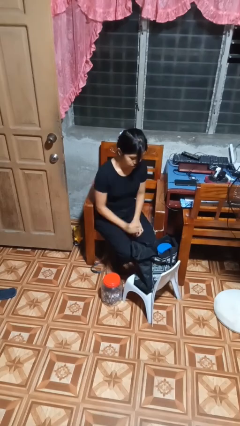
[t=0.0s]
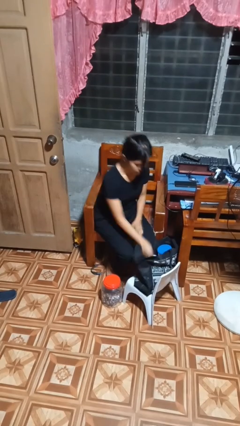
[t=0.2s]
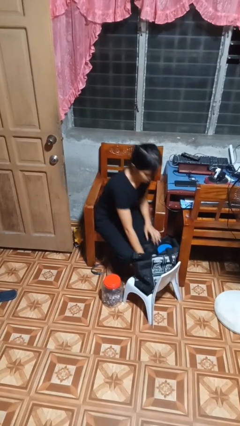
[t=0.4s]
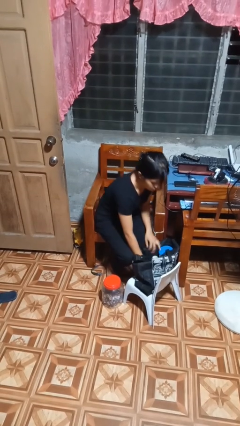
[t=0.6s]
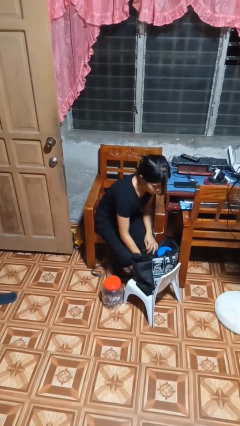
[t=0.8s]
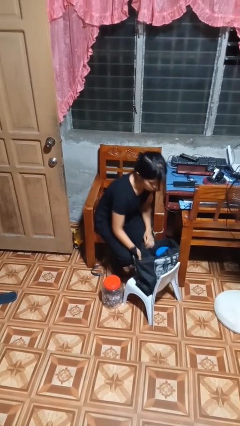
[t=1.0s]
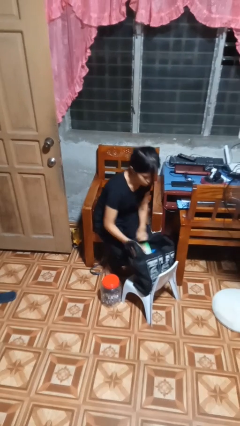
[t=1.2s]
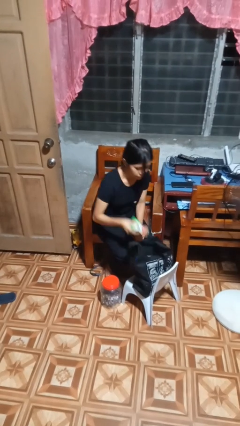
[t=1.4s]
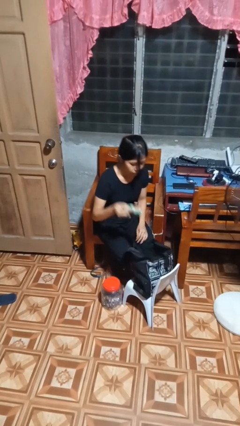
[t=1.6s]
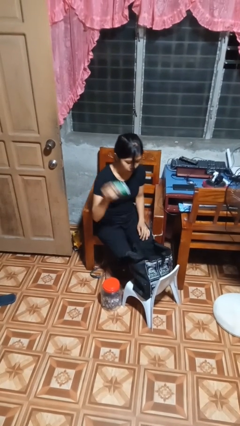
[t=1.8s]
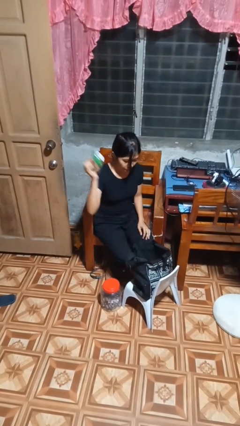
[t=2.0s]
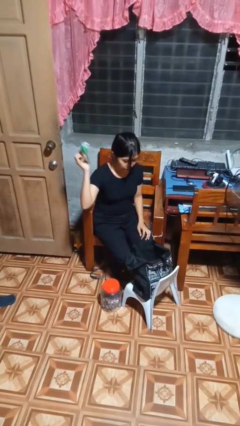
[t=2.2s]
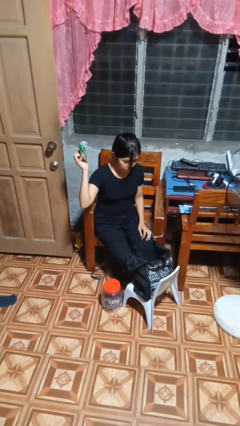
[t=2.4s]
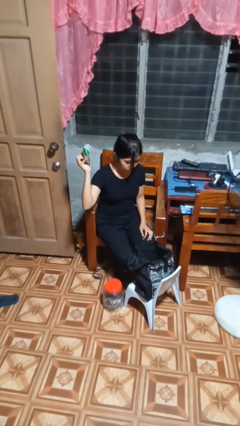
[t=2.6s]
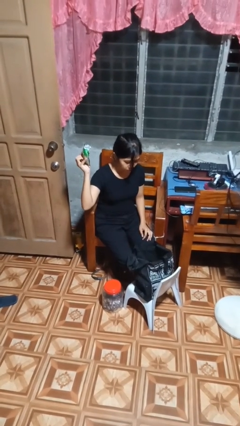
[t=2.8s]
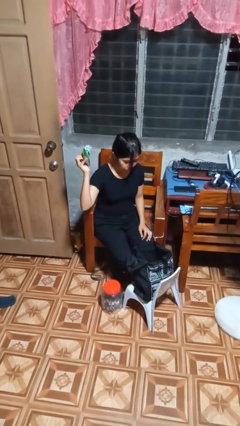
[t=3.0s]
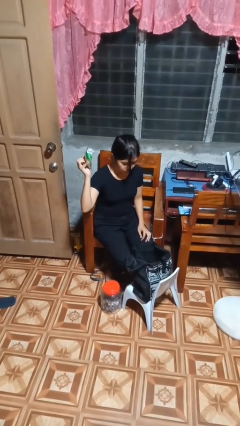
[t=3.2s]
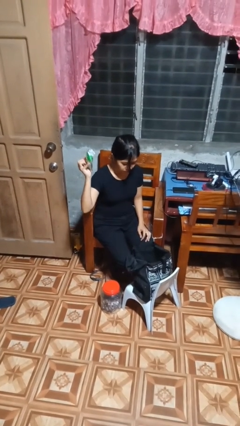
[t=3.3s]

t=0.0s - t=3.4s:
person searches in bag

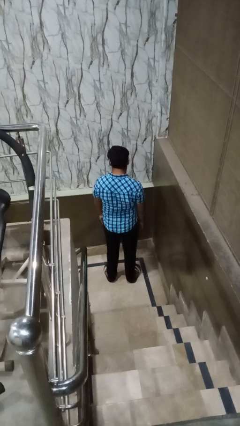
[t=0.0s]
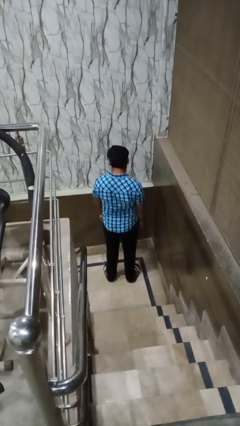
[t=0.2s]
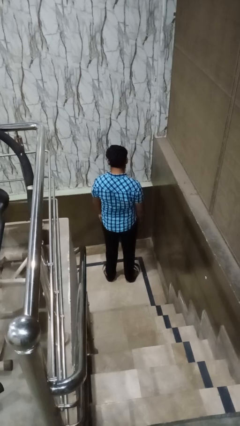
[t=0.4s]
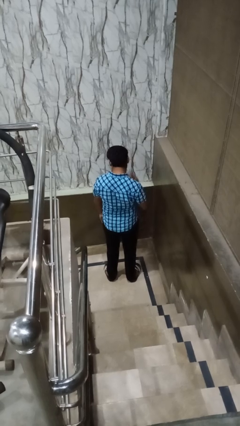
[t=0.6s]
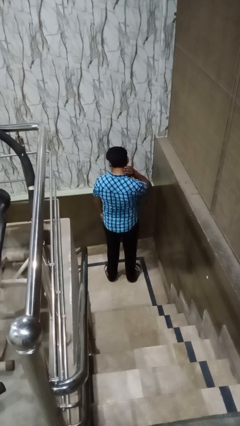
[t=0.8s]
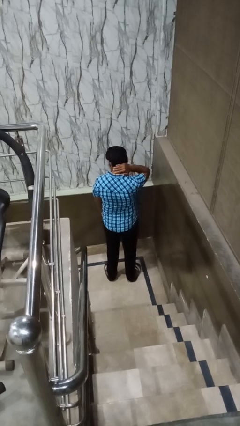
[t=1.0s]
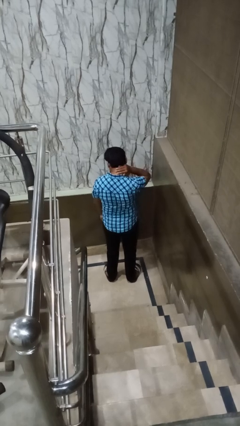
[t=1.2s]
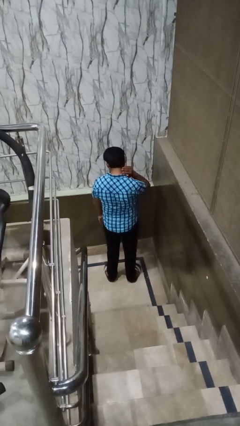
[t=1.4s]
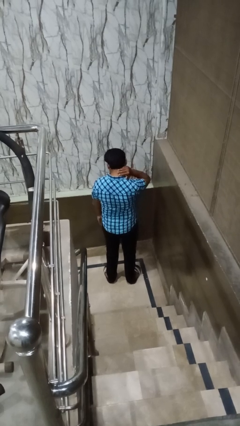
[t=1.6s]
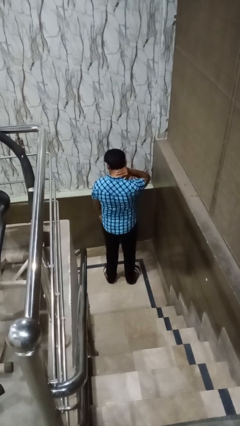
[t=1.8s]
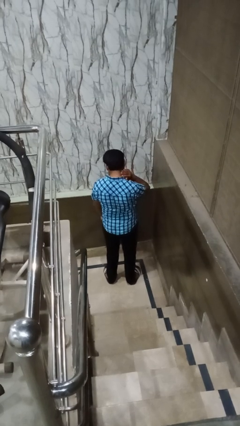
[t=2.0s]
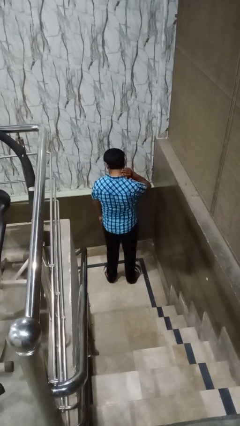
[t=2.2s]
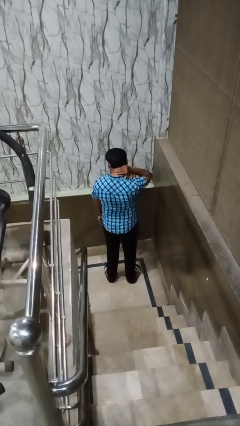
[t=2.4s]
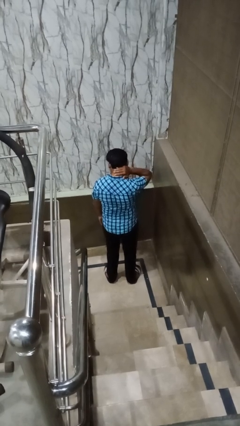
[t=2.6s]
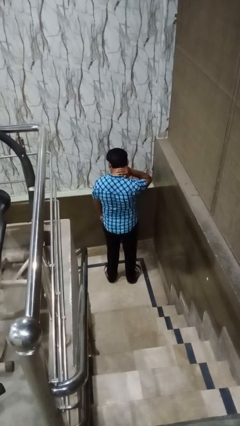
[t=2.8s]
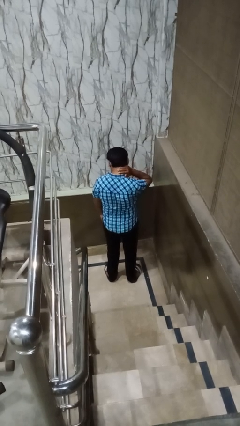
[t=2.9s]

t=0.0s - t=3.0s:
person rubs neck

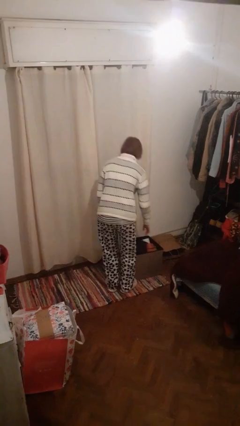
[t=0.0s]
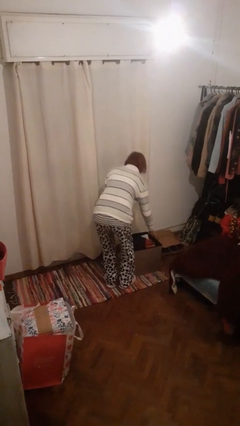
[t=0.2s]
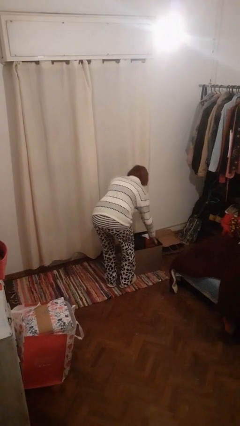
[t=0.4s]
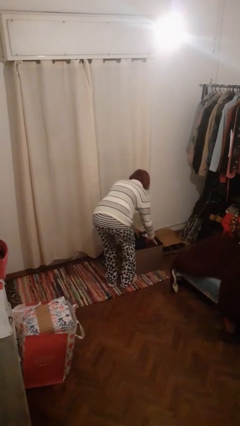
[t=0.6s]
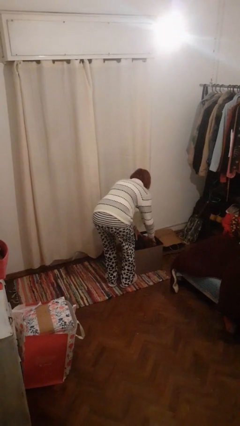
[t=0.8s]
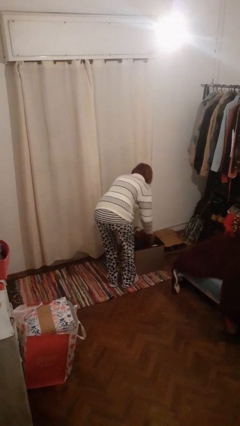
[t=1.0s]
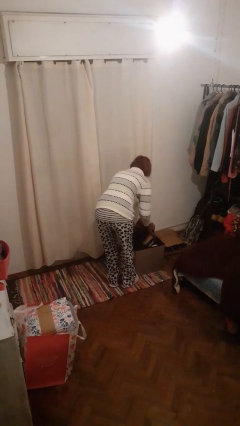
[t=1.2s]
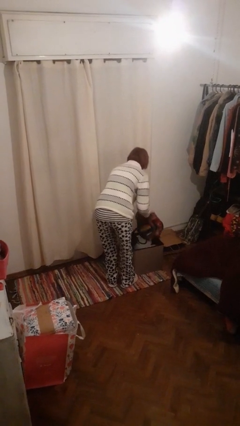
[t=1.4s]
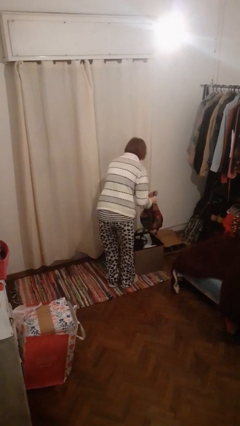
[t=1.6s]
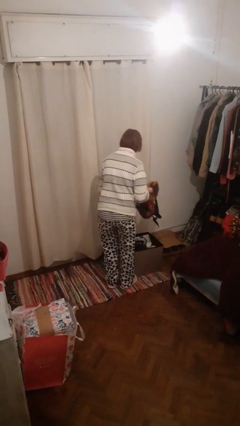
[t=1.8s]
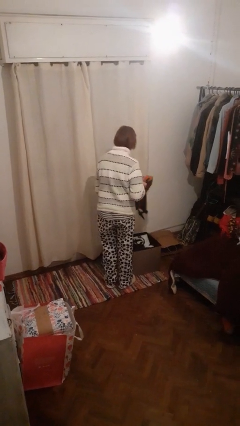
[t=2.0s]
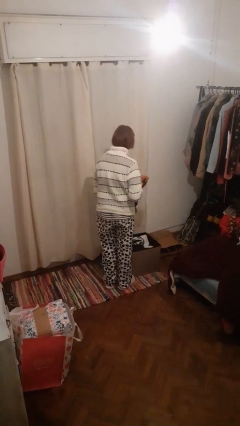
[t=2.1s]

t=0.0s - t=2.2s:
person takes object from basket

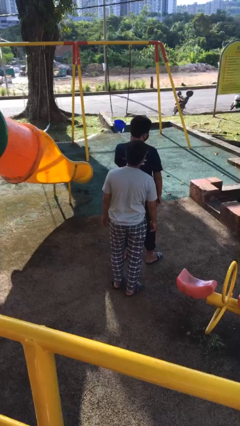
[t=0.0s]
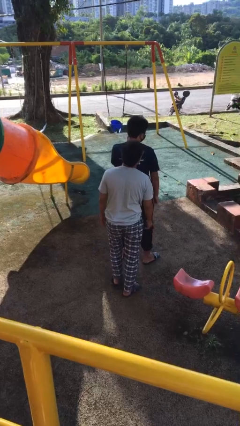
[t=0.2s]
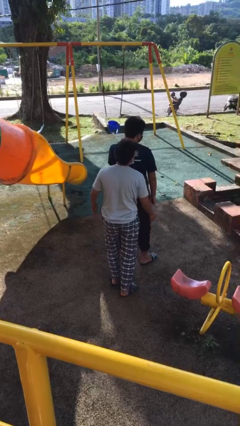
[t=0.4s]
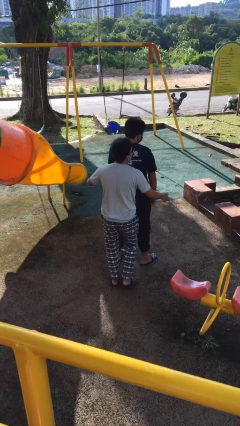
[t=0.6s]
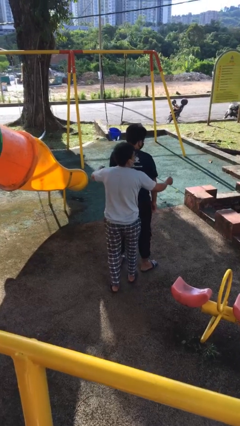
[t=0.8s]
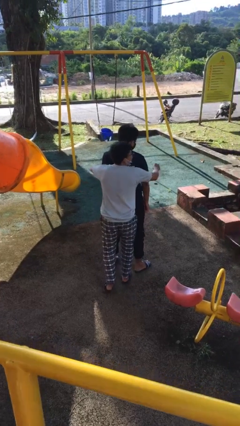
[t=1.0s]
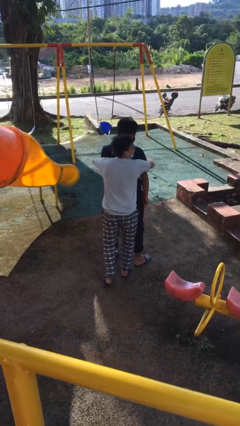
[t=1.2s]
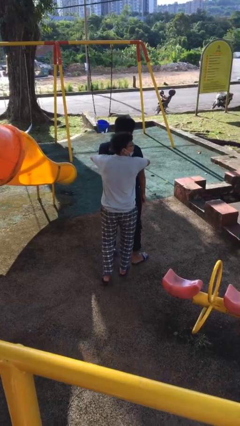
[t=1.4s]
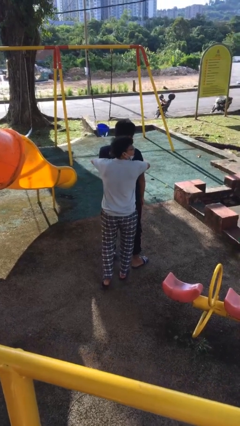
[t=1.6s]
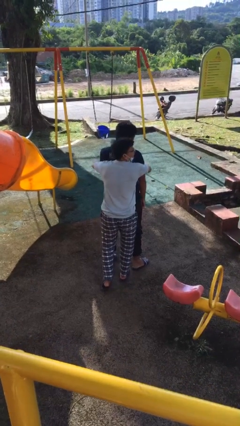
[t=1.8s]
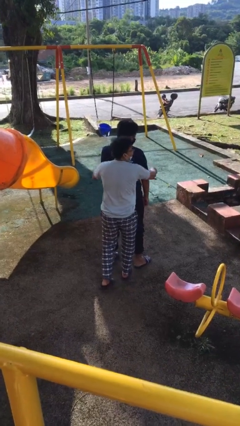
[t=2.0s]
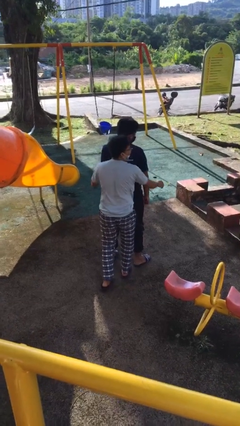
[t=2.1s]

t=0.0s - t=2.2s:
person hugs person from behind

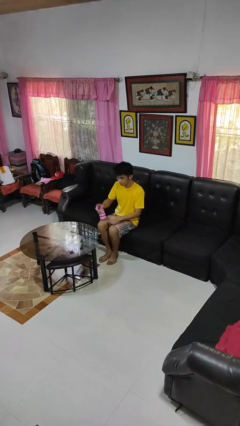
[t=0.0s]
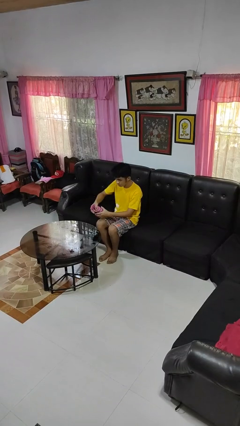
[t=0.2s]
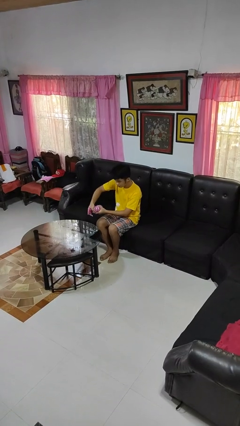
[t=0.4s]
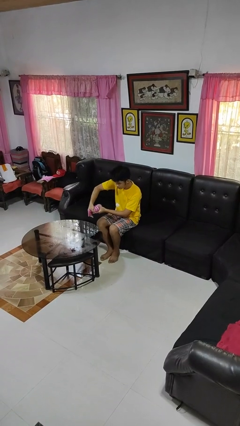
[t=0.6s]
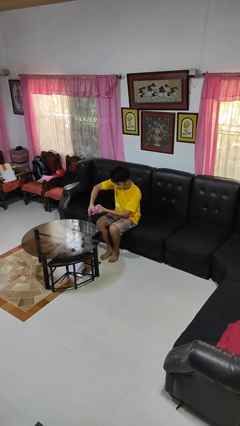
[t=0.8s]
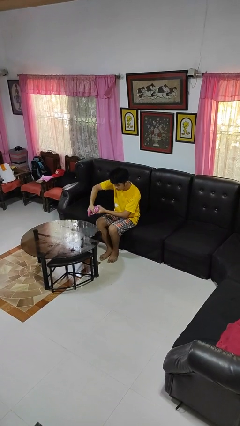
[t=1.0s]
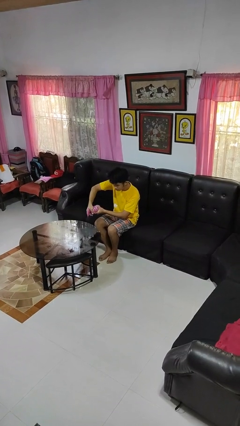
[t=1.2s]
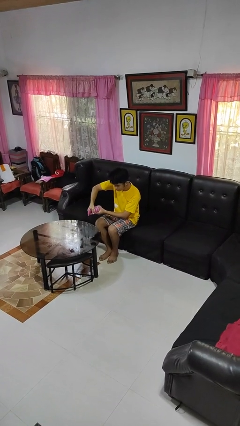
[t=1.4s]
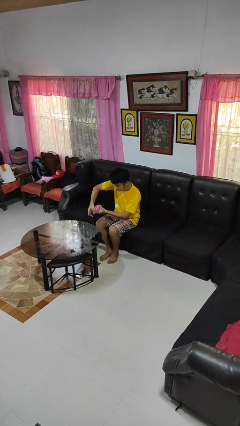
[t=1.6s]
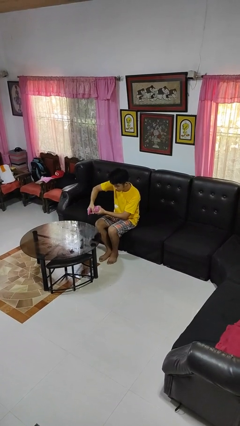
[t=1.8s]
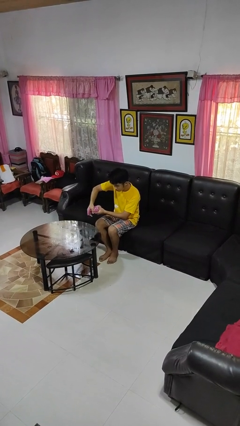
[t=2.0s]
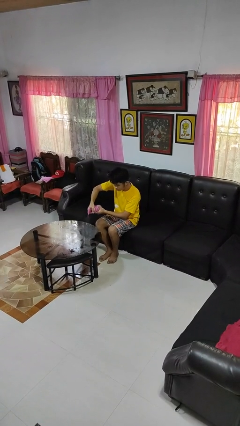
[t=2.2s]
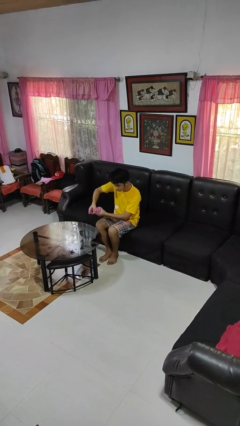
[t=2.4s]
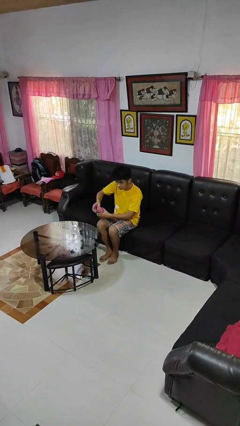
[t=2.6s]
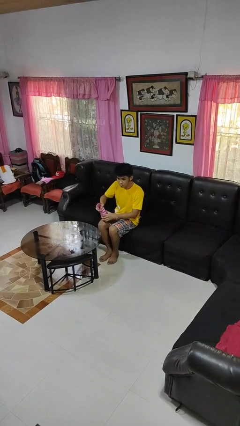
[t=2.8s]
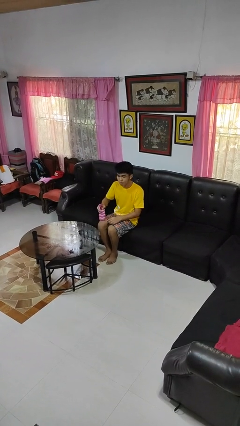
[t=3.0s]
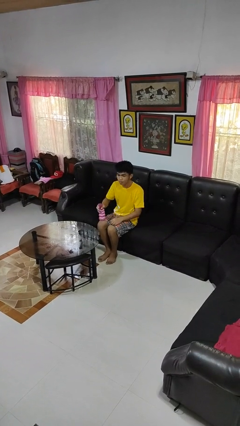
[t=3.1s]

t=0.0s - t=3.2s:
person sprays from bottle

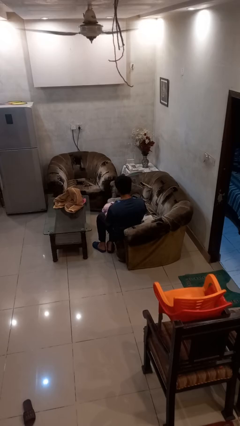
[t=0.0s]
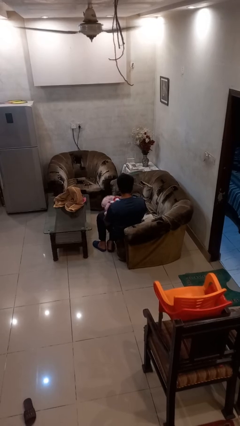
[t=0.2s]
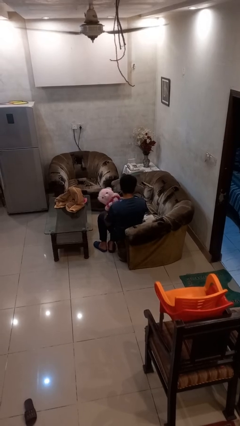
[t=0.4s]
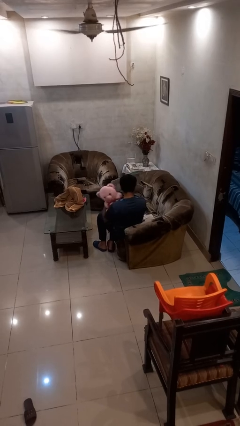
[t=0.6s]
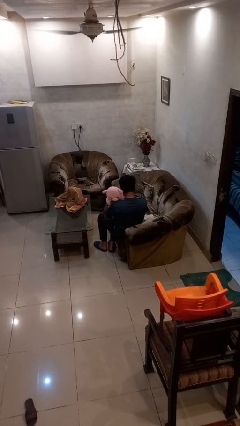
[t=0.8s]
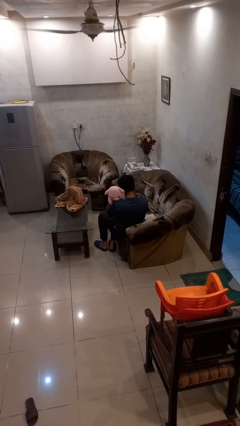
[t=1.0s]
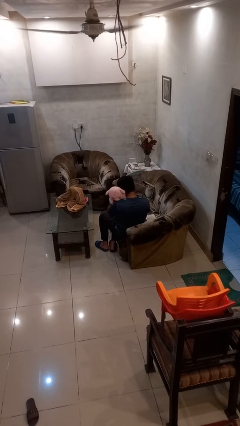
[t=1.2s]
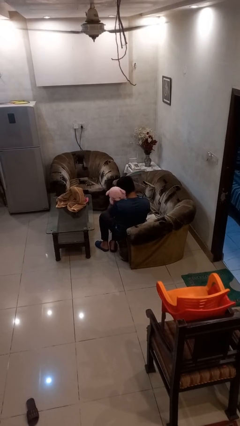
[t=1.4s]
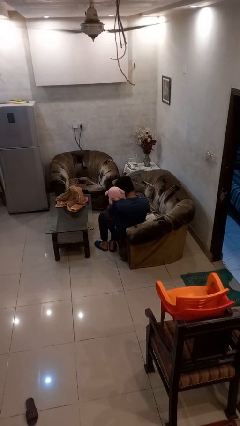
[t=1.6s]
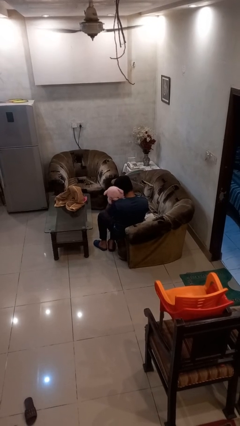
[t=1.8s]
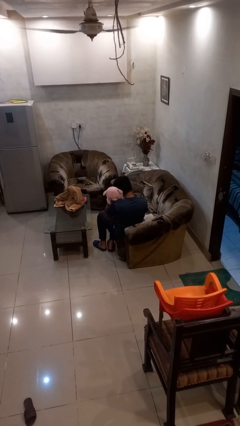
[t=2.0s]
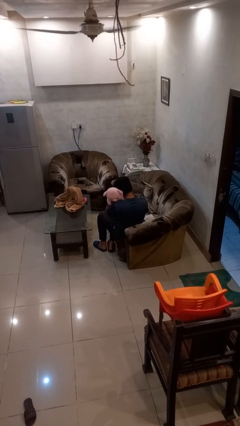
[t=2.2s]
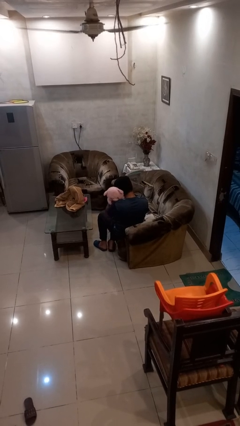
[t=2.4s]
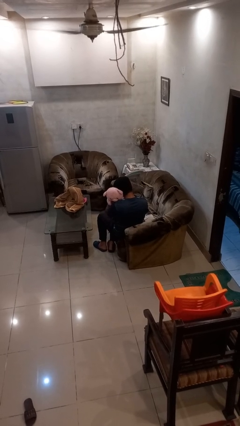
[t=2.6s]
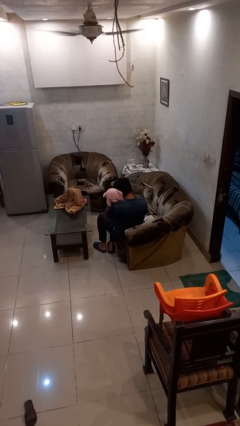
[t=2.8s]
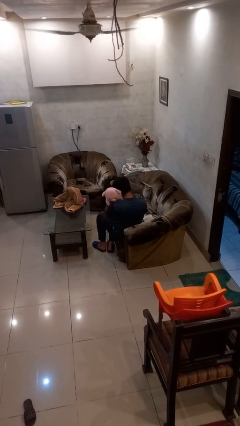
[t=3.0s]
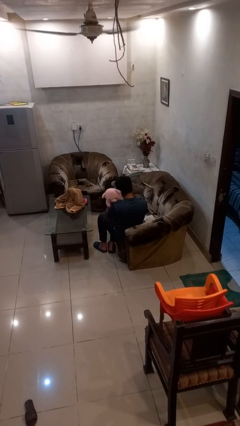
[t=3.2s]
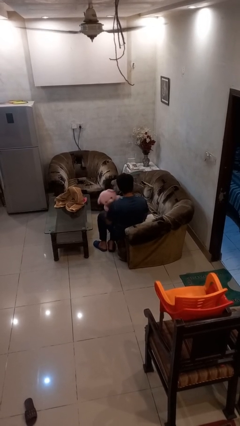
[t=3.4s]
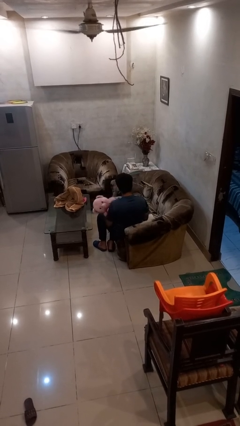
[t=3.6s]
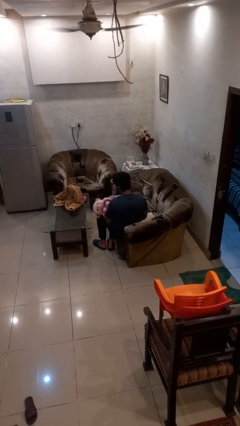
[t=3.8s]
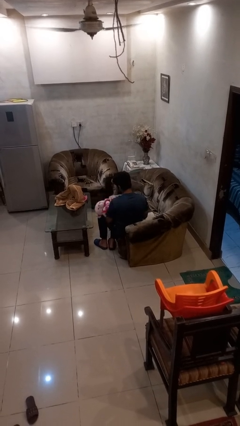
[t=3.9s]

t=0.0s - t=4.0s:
person hugs stuffed animal
